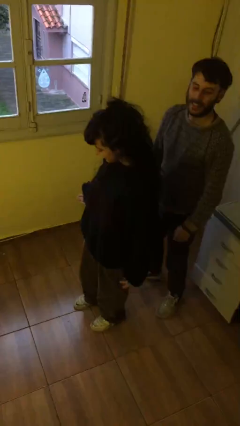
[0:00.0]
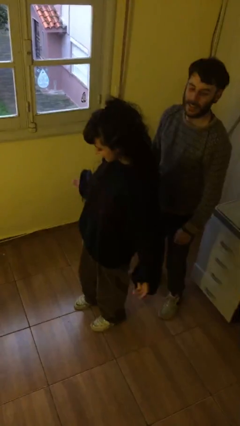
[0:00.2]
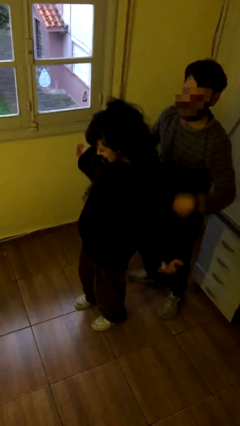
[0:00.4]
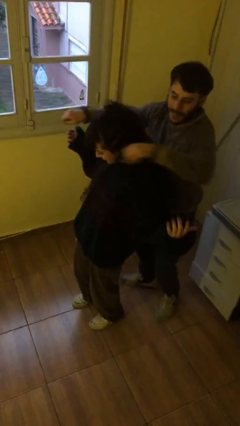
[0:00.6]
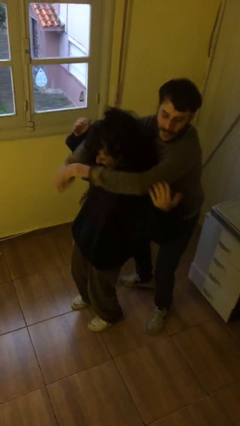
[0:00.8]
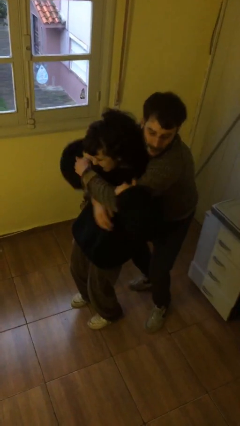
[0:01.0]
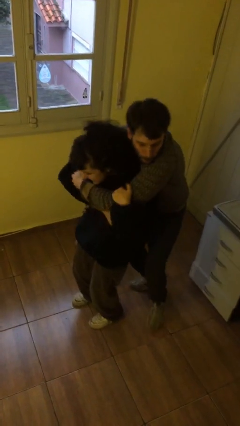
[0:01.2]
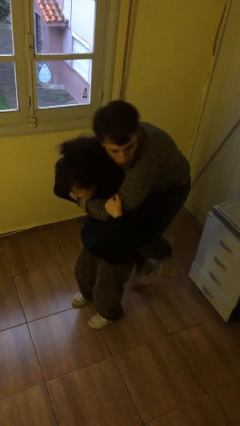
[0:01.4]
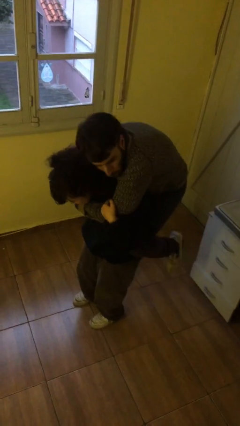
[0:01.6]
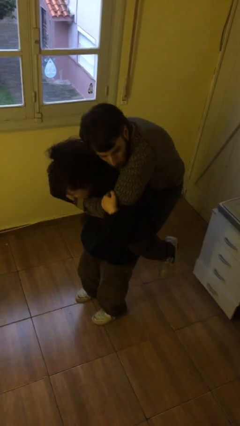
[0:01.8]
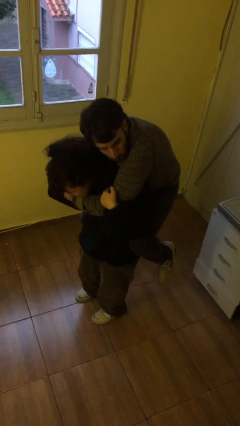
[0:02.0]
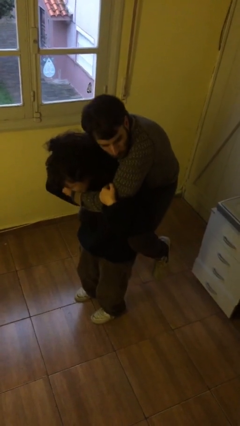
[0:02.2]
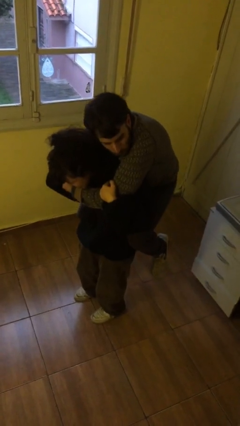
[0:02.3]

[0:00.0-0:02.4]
person picks up person

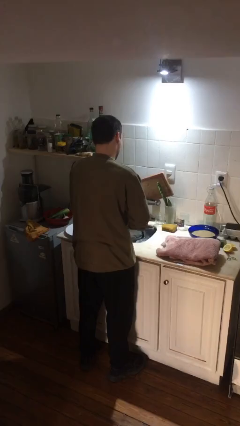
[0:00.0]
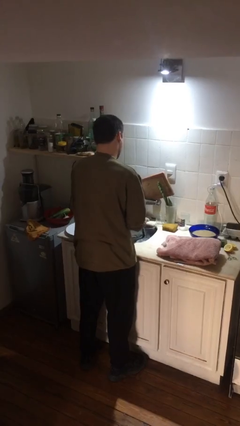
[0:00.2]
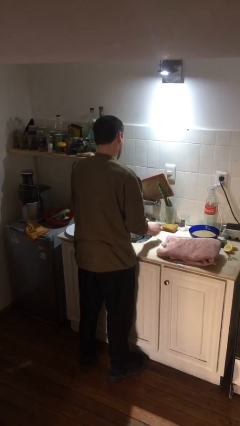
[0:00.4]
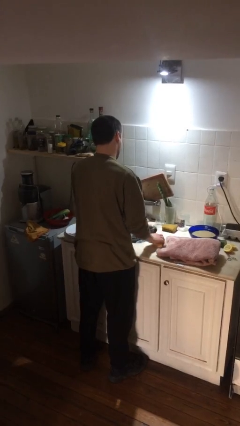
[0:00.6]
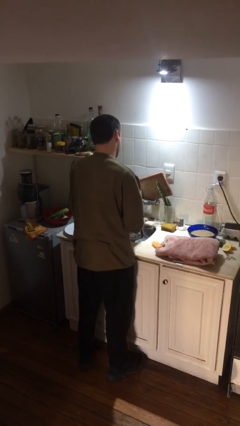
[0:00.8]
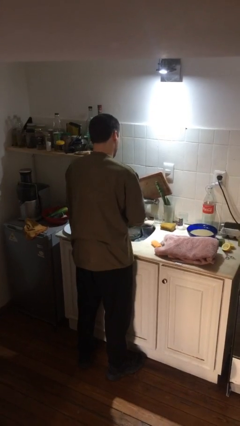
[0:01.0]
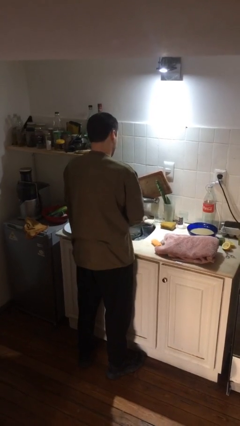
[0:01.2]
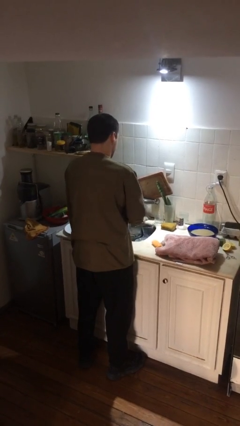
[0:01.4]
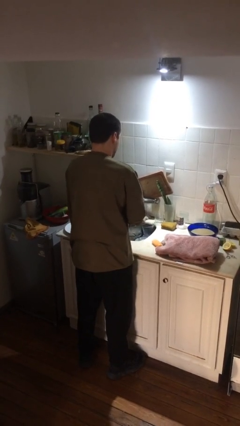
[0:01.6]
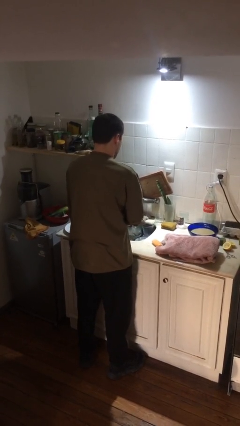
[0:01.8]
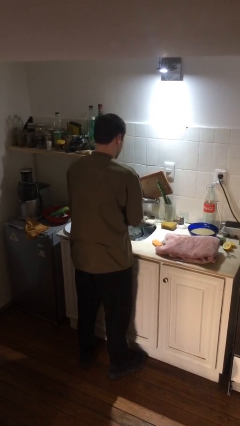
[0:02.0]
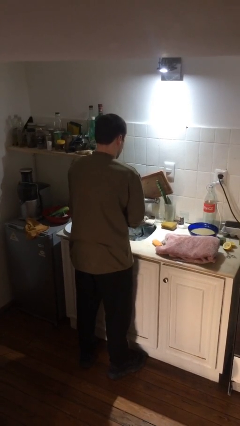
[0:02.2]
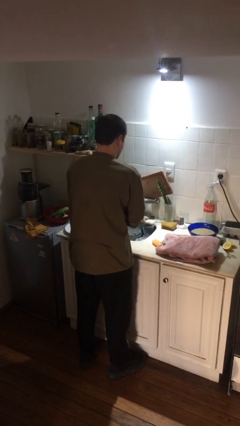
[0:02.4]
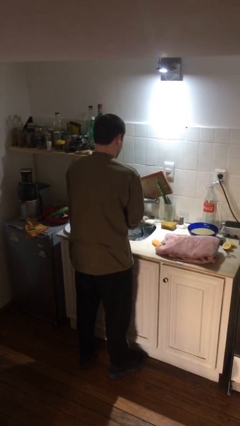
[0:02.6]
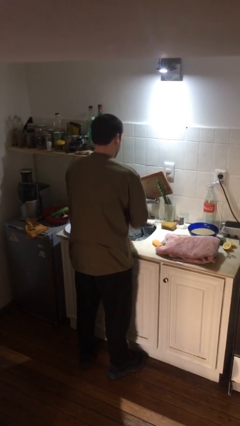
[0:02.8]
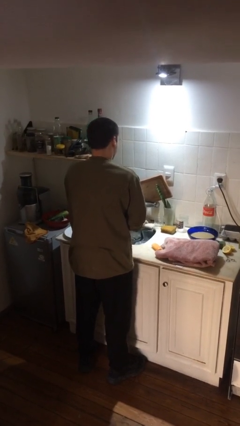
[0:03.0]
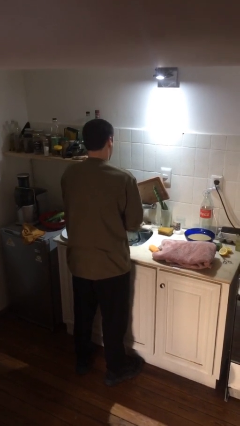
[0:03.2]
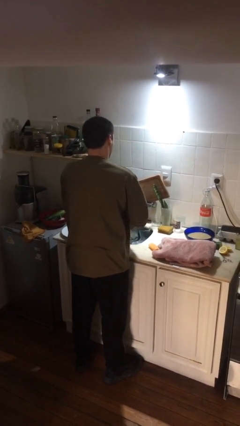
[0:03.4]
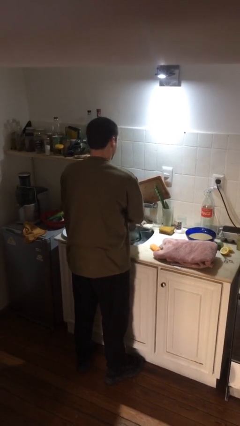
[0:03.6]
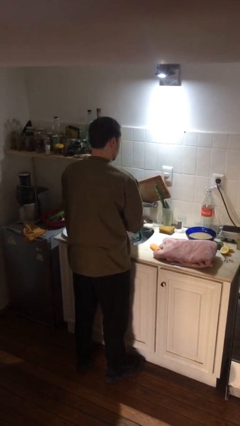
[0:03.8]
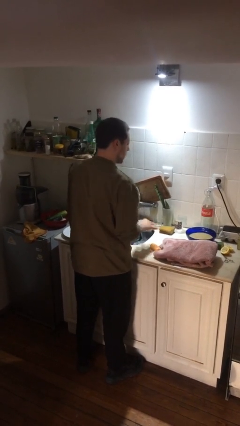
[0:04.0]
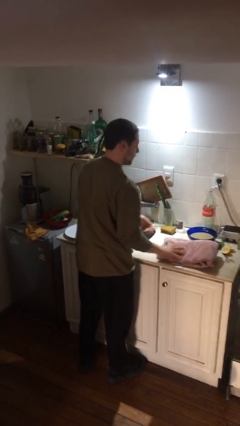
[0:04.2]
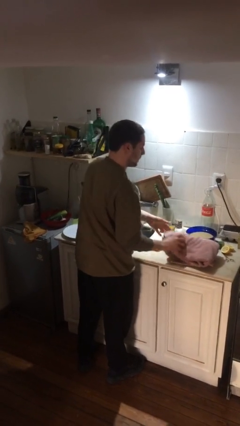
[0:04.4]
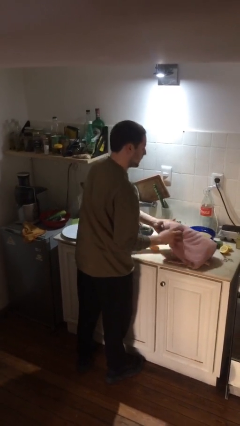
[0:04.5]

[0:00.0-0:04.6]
person washes hands

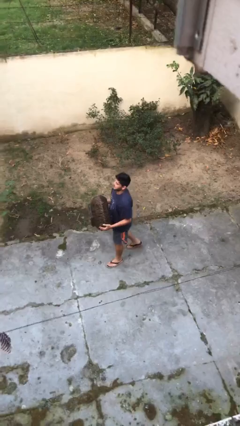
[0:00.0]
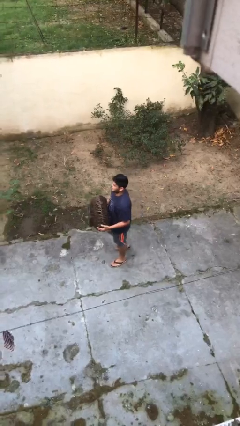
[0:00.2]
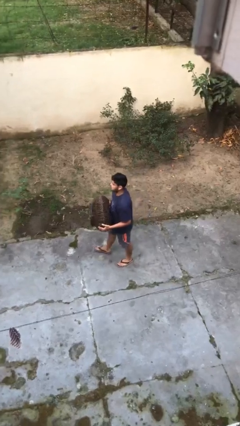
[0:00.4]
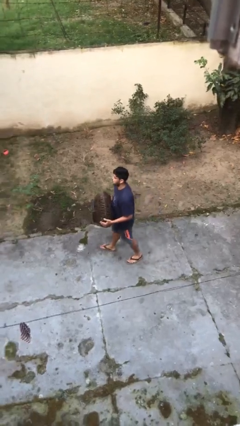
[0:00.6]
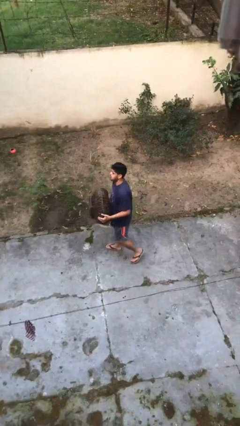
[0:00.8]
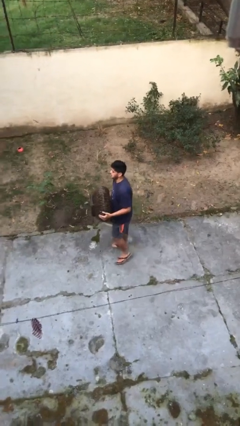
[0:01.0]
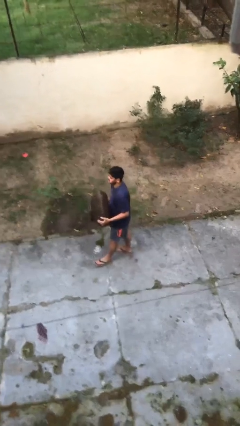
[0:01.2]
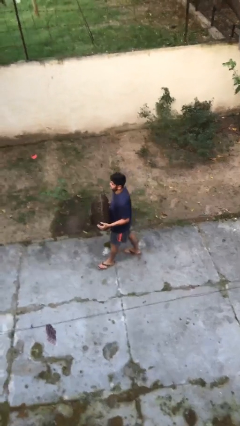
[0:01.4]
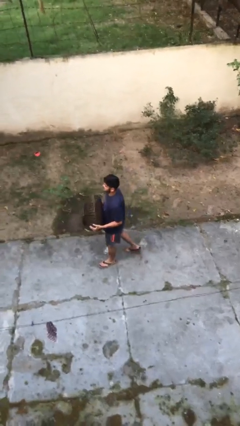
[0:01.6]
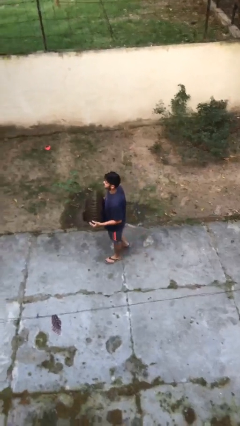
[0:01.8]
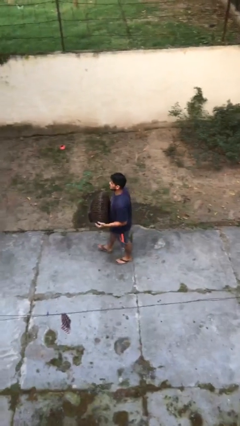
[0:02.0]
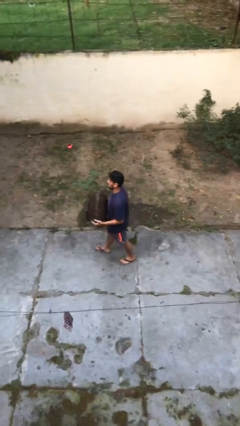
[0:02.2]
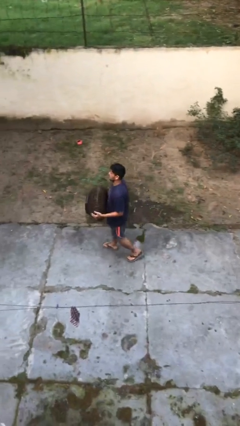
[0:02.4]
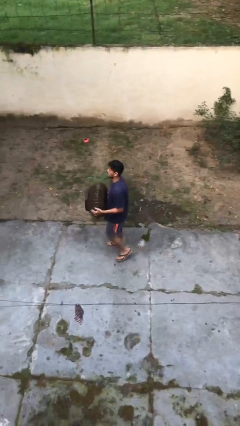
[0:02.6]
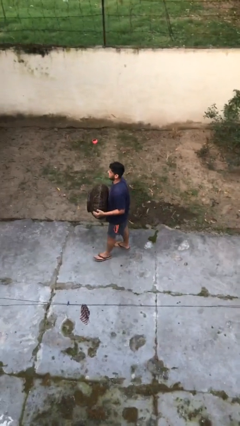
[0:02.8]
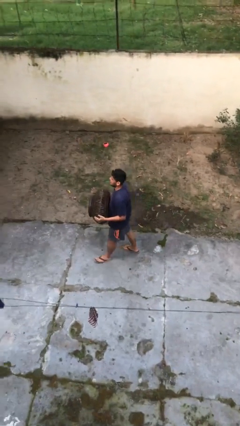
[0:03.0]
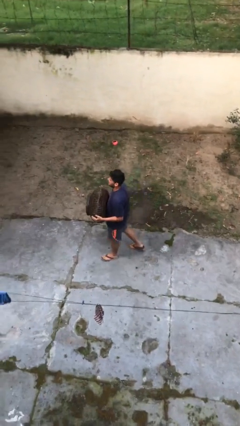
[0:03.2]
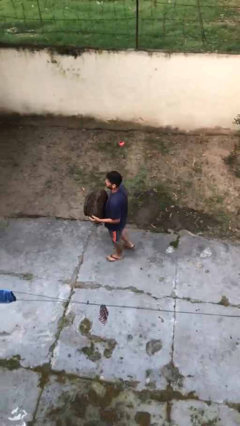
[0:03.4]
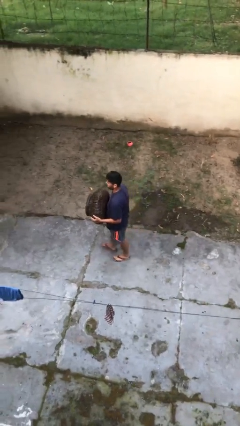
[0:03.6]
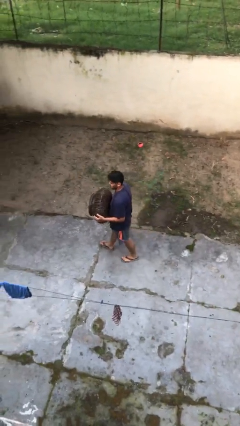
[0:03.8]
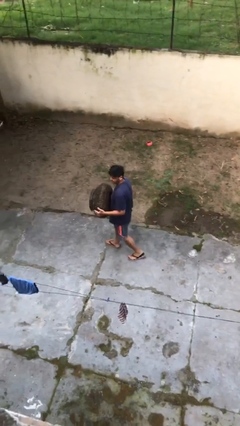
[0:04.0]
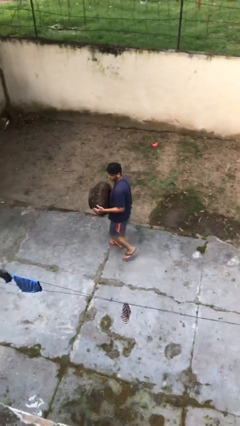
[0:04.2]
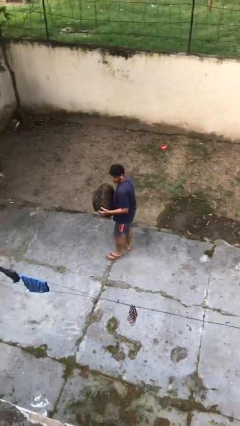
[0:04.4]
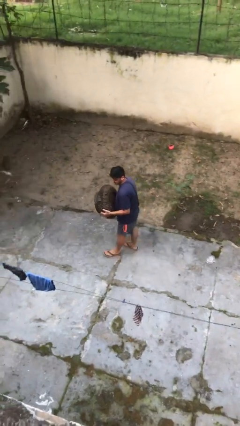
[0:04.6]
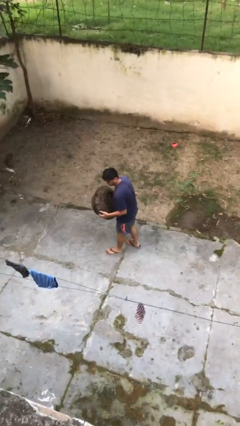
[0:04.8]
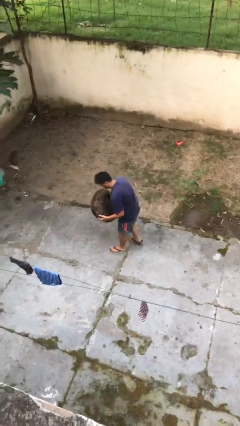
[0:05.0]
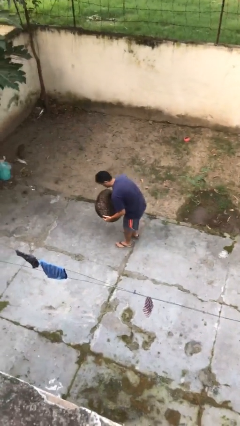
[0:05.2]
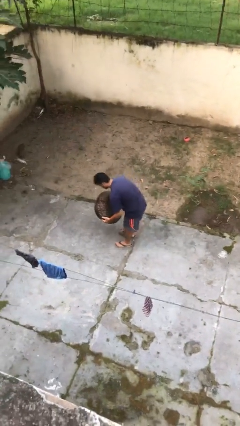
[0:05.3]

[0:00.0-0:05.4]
person carries heavy object

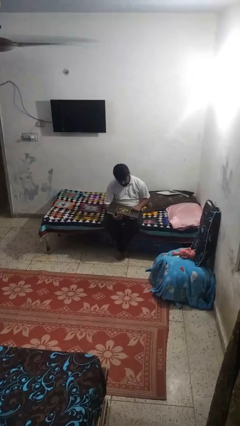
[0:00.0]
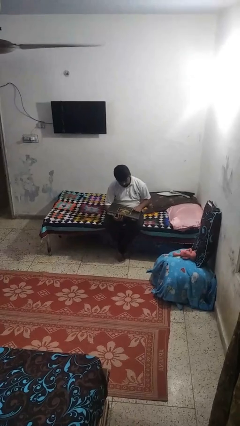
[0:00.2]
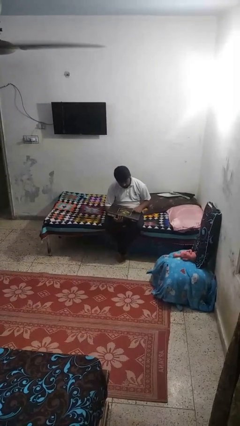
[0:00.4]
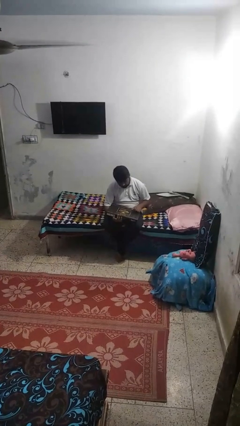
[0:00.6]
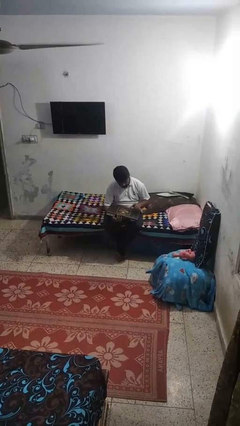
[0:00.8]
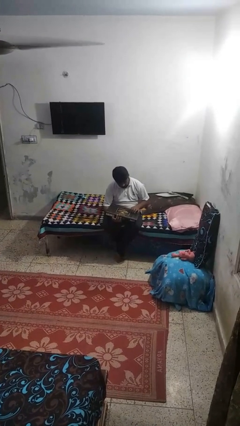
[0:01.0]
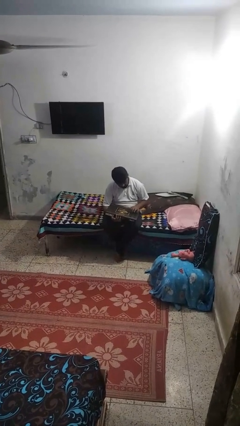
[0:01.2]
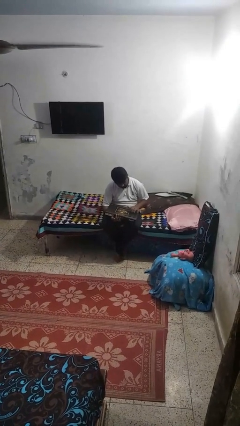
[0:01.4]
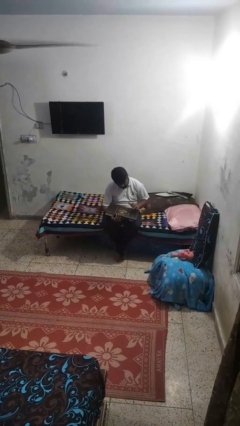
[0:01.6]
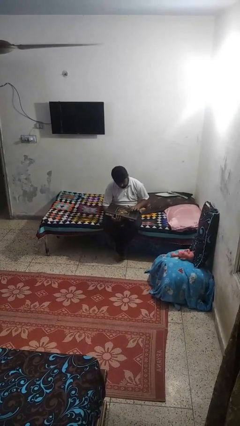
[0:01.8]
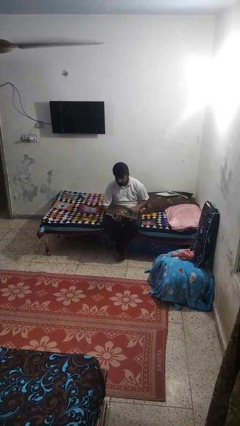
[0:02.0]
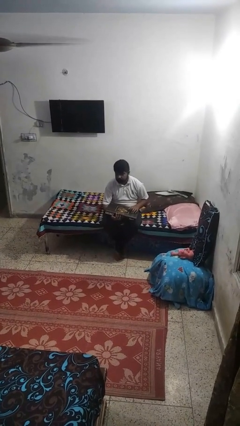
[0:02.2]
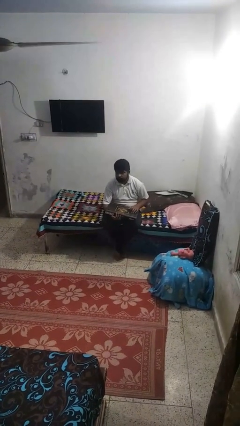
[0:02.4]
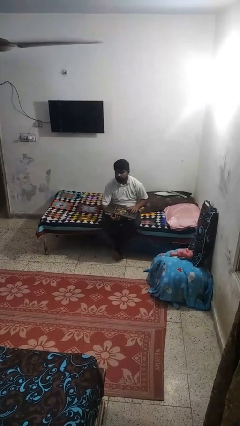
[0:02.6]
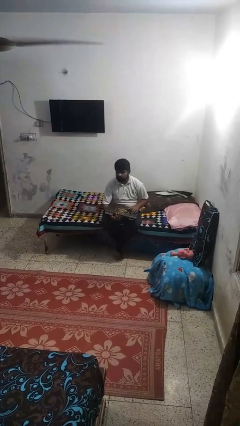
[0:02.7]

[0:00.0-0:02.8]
person taps object with finger

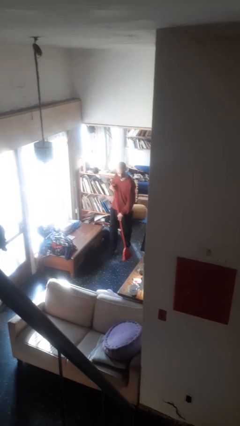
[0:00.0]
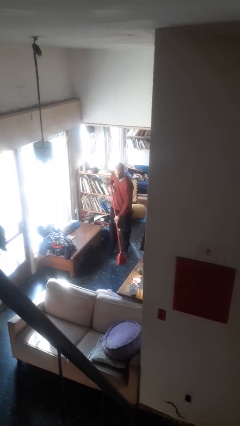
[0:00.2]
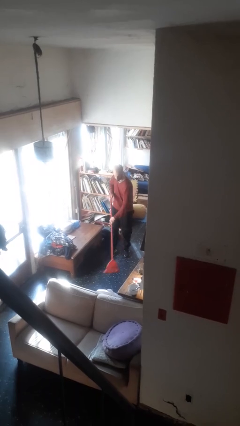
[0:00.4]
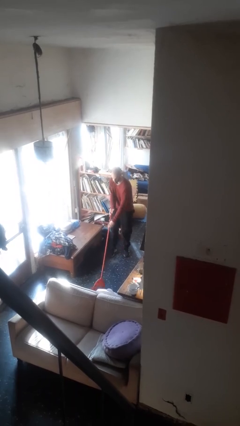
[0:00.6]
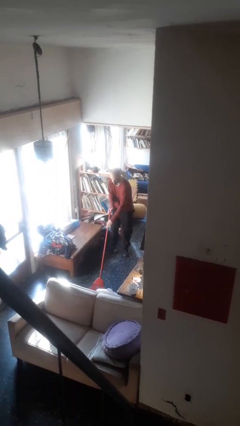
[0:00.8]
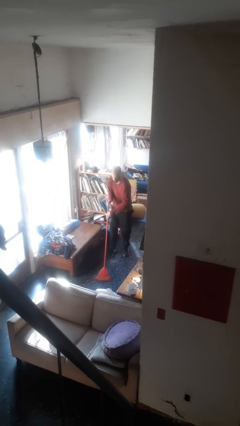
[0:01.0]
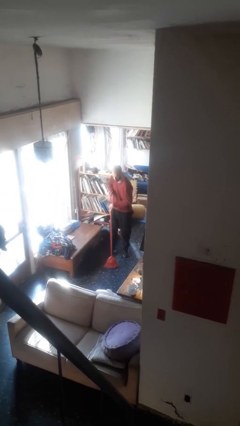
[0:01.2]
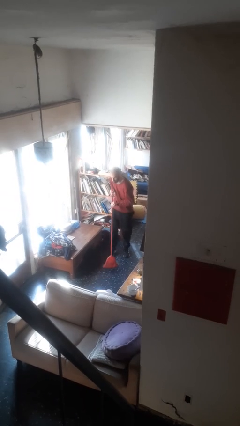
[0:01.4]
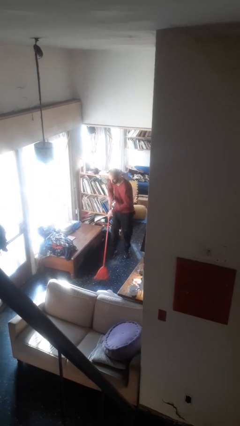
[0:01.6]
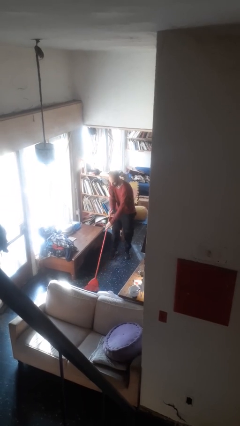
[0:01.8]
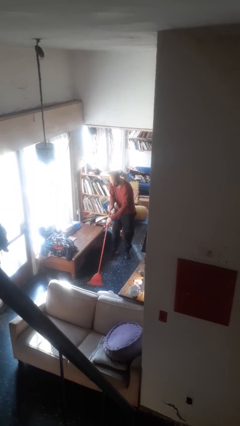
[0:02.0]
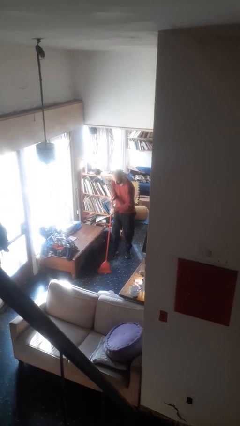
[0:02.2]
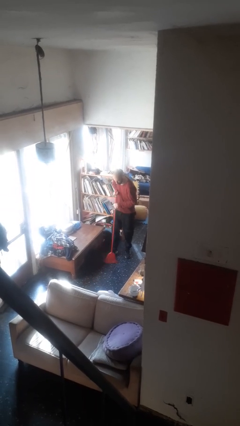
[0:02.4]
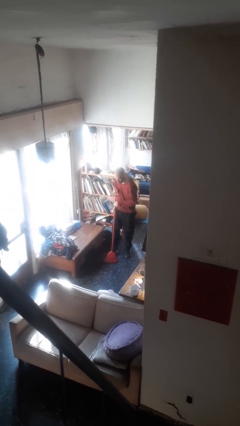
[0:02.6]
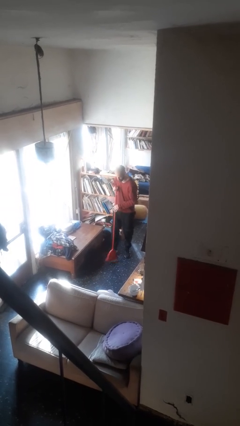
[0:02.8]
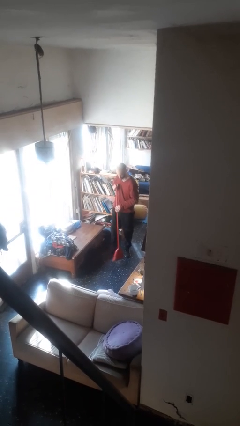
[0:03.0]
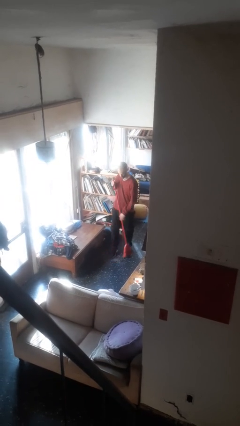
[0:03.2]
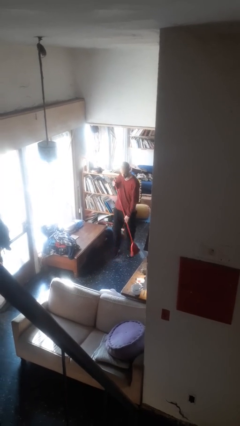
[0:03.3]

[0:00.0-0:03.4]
person sweeps floor
